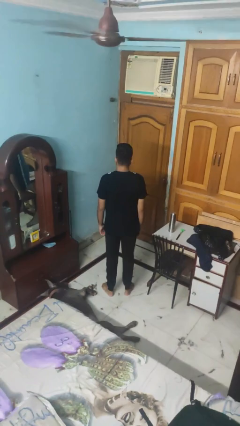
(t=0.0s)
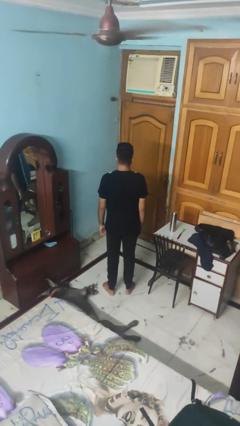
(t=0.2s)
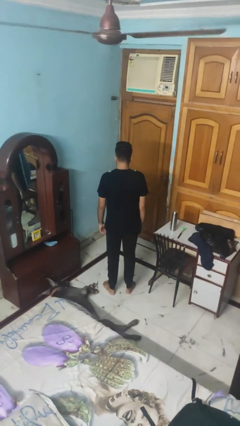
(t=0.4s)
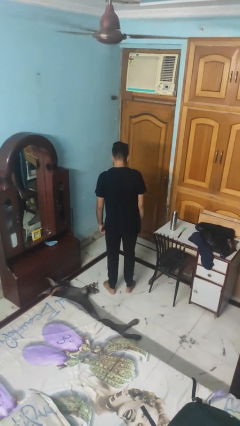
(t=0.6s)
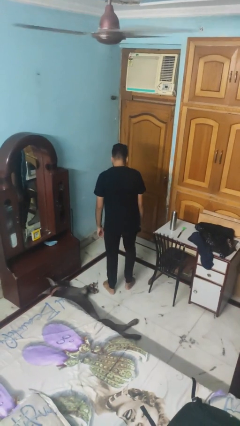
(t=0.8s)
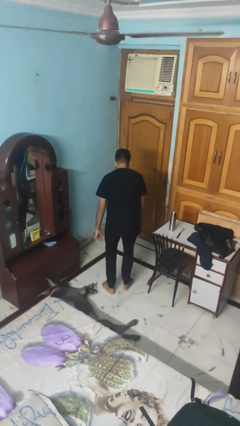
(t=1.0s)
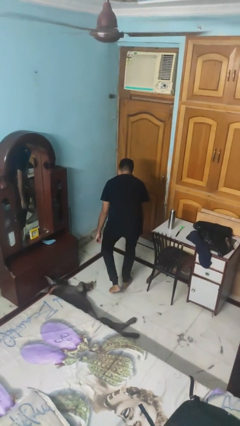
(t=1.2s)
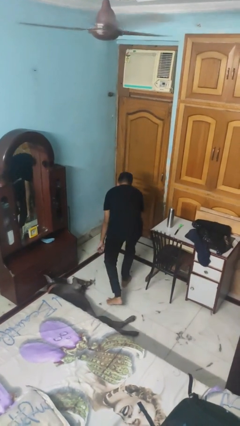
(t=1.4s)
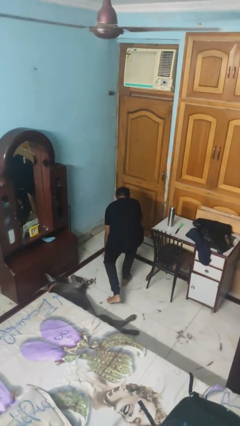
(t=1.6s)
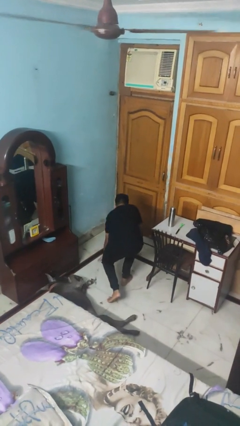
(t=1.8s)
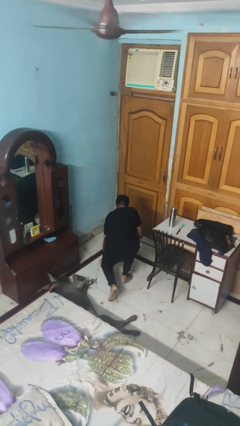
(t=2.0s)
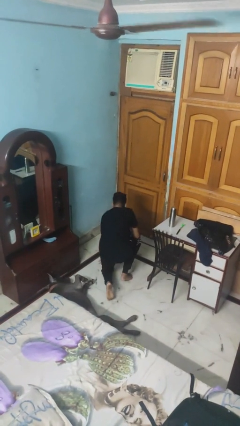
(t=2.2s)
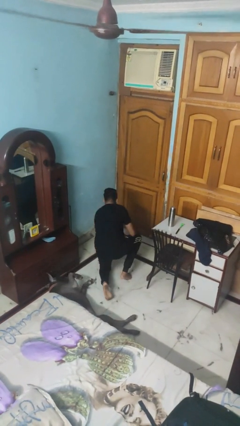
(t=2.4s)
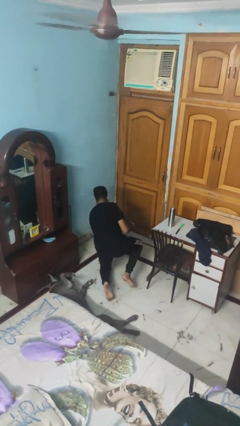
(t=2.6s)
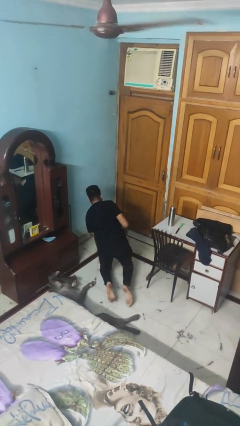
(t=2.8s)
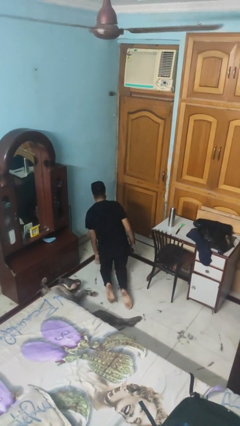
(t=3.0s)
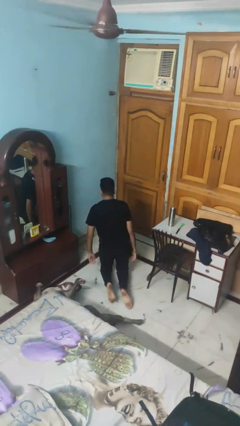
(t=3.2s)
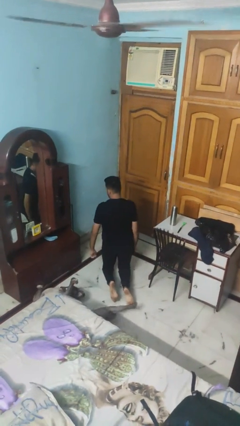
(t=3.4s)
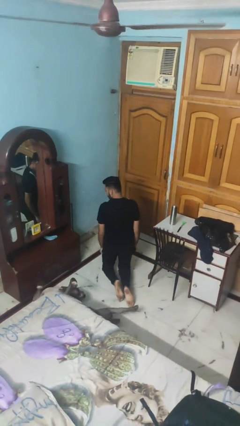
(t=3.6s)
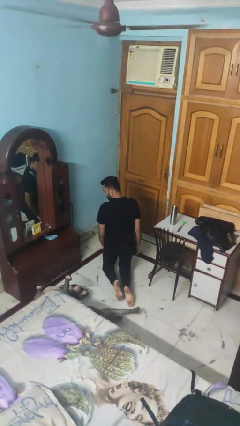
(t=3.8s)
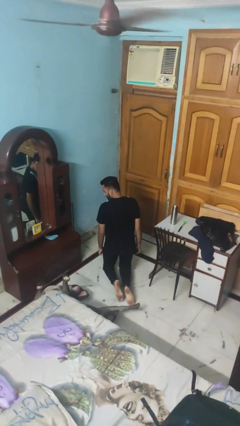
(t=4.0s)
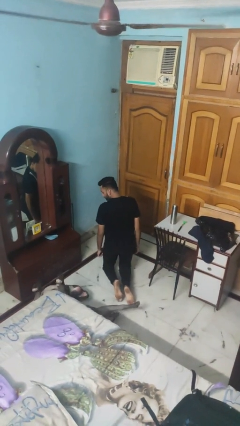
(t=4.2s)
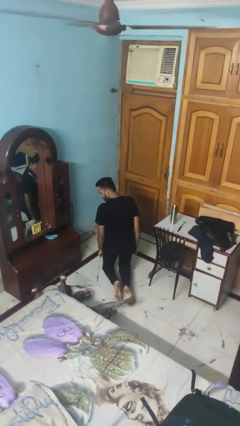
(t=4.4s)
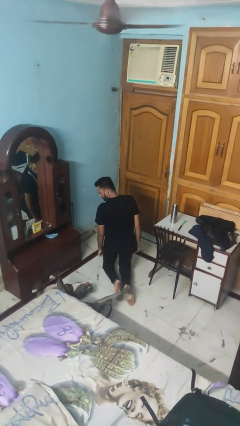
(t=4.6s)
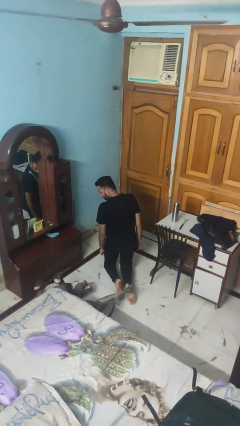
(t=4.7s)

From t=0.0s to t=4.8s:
person kneels

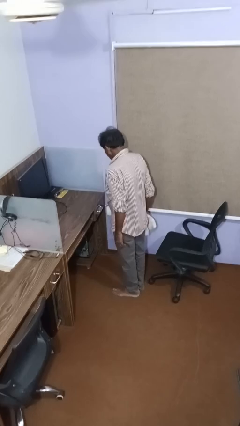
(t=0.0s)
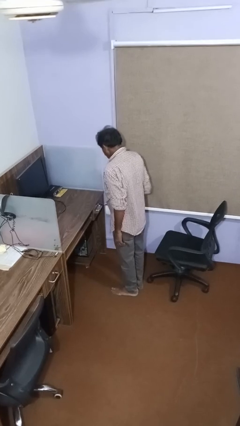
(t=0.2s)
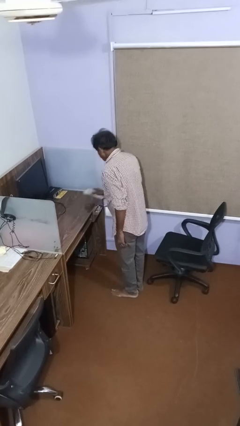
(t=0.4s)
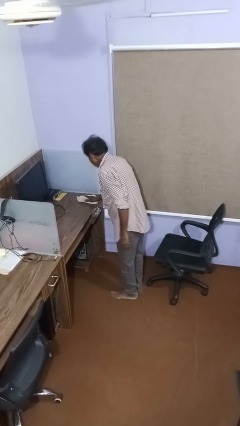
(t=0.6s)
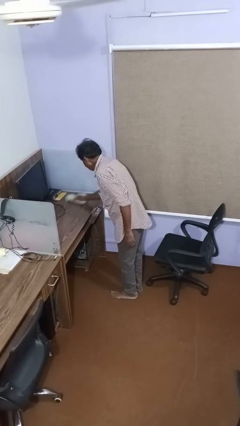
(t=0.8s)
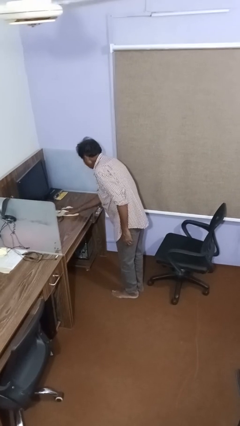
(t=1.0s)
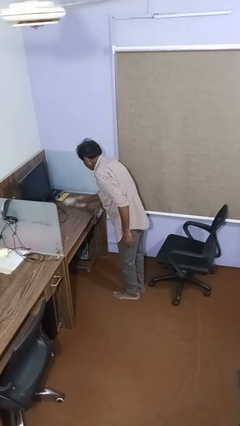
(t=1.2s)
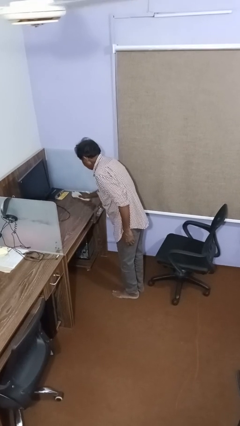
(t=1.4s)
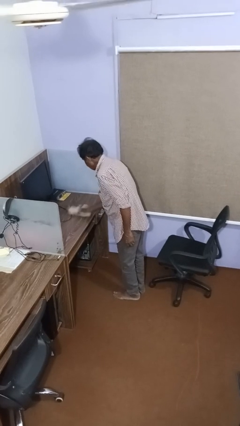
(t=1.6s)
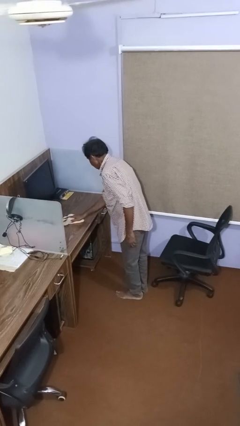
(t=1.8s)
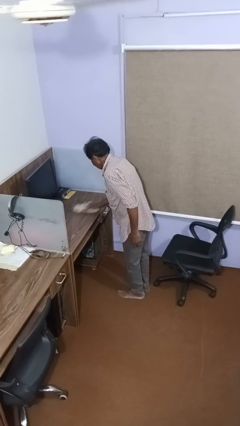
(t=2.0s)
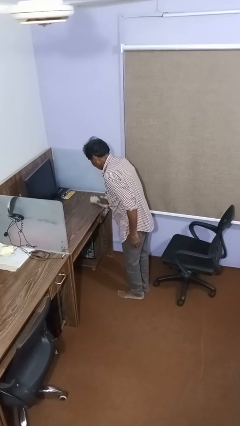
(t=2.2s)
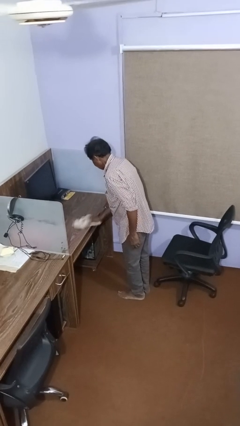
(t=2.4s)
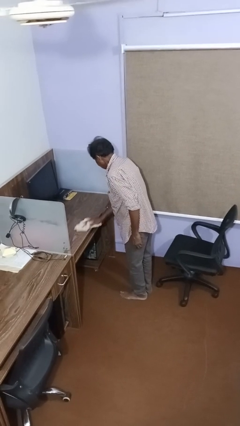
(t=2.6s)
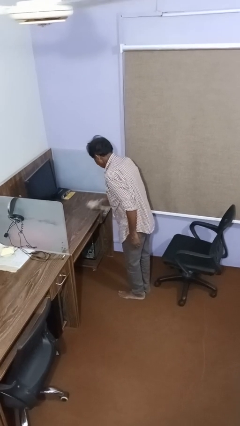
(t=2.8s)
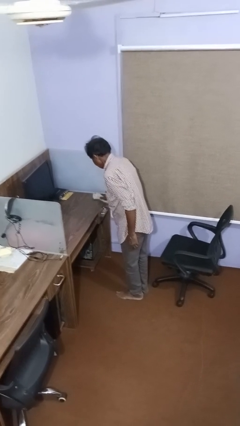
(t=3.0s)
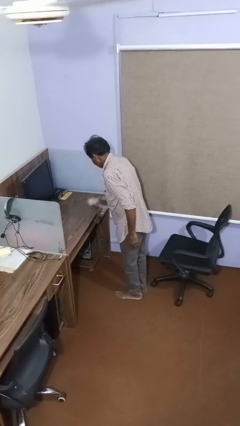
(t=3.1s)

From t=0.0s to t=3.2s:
person dusts furniture

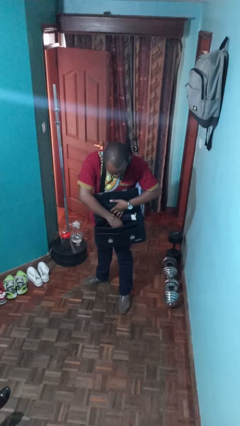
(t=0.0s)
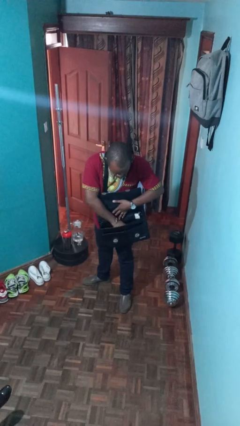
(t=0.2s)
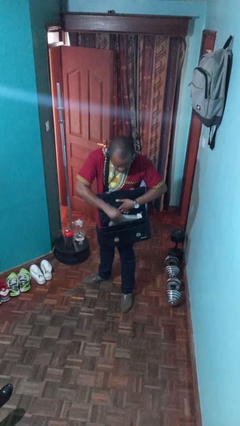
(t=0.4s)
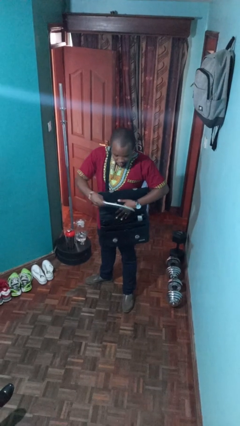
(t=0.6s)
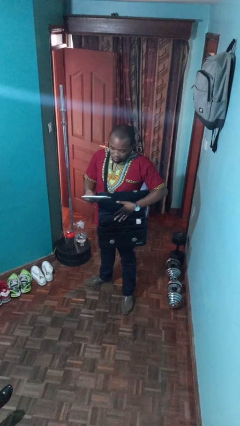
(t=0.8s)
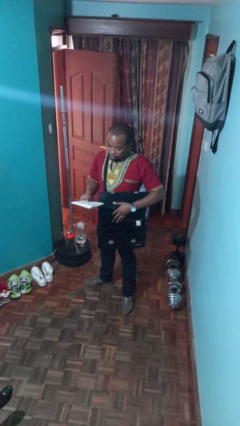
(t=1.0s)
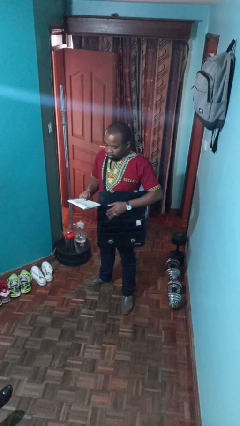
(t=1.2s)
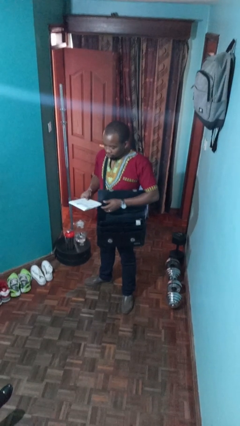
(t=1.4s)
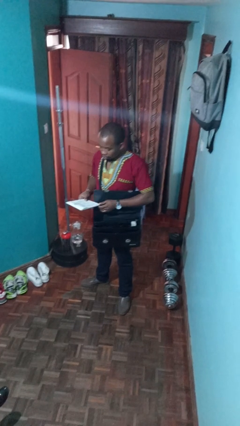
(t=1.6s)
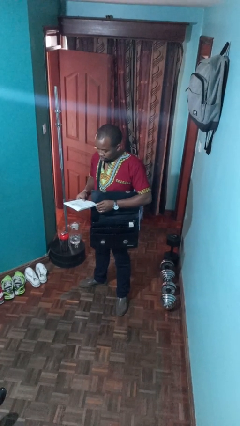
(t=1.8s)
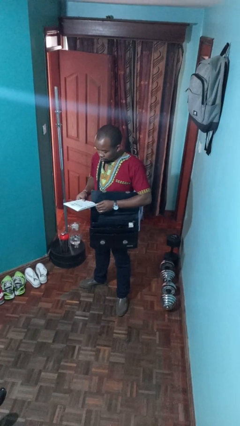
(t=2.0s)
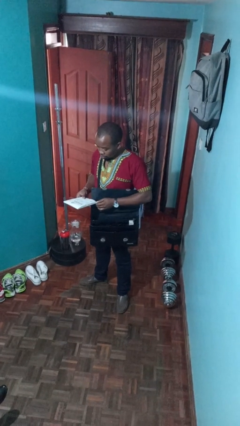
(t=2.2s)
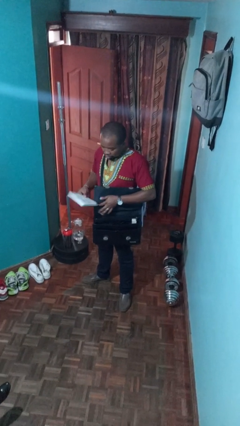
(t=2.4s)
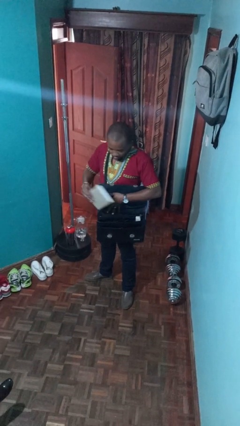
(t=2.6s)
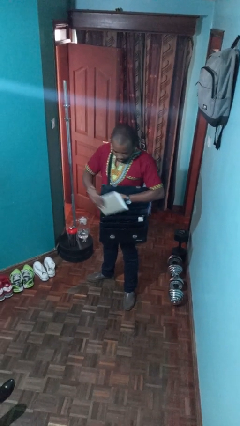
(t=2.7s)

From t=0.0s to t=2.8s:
person takes object from purse

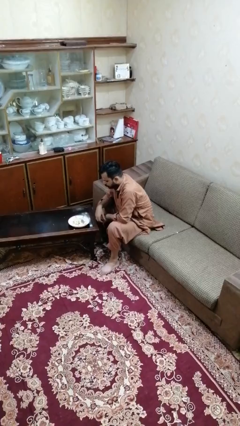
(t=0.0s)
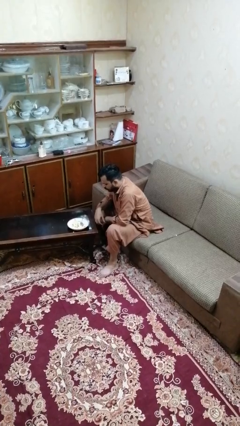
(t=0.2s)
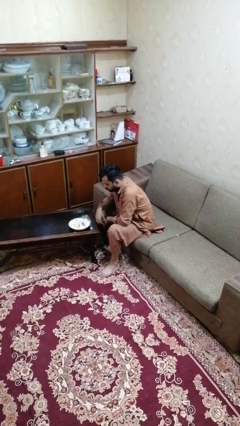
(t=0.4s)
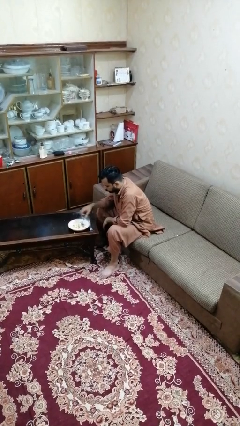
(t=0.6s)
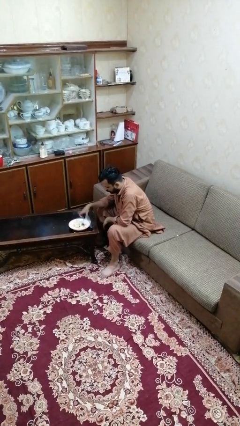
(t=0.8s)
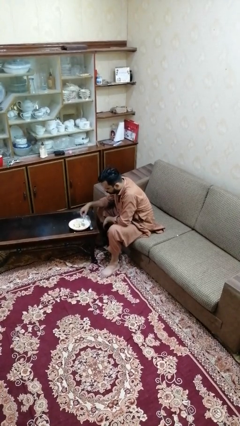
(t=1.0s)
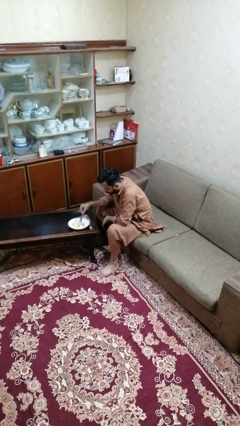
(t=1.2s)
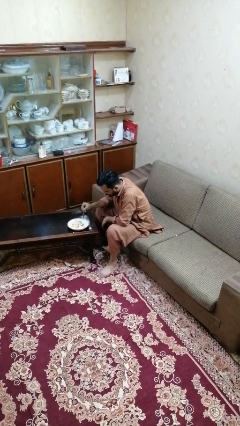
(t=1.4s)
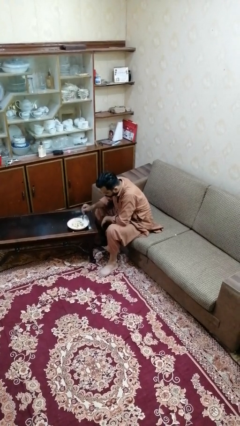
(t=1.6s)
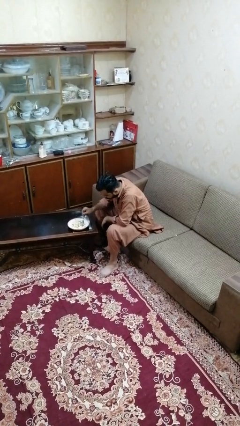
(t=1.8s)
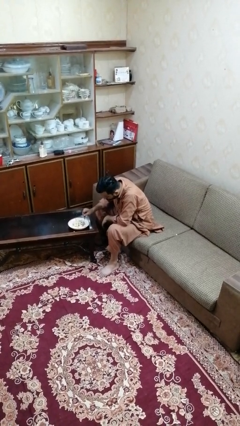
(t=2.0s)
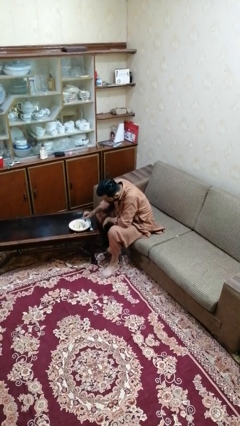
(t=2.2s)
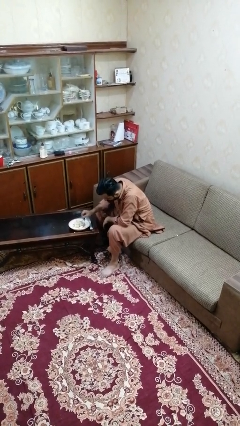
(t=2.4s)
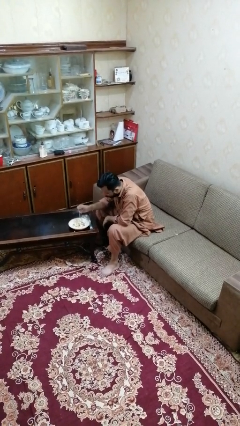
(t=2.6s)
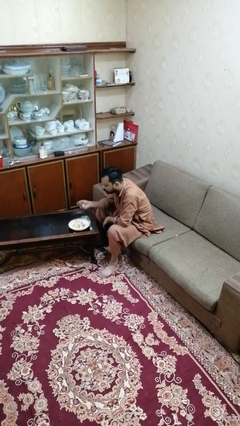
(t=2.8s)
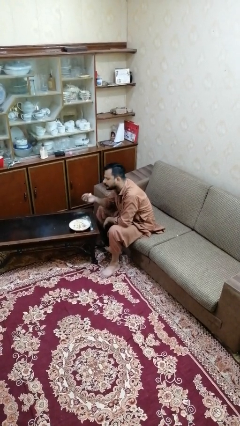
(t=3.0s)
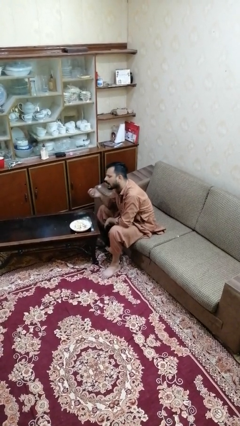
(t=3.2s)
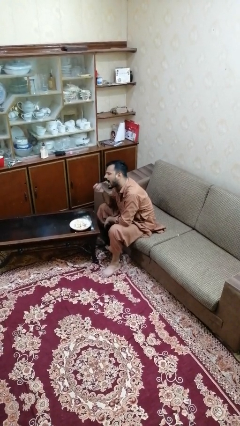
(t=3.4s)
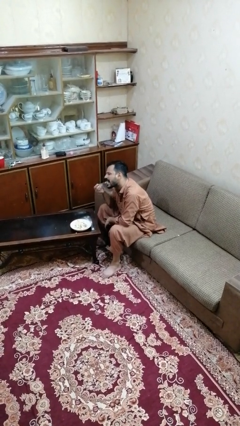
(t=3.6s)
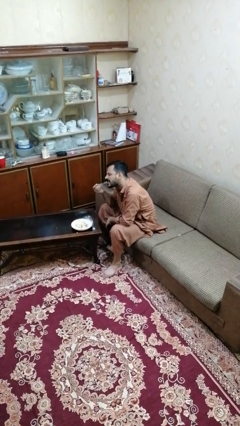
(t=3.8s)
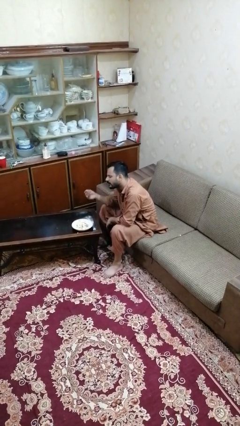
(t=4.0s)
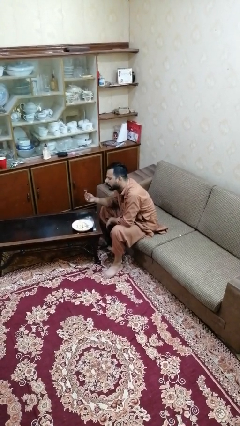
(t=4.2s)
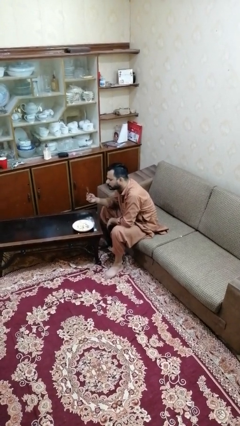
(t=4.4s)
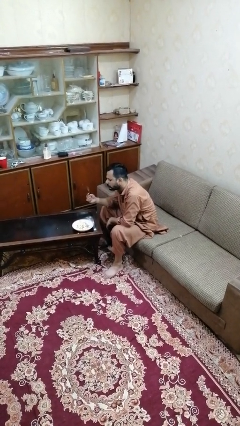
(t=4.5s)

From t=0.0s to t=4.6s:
person eats with utensil

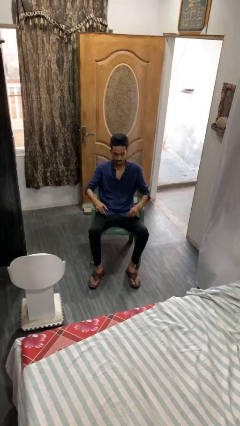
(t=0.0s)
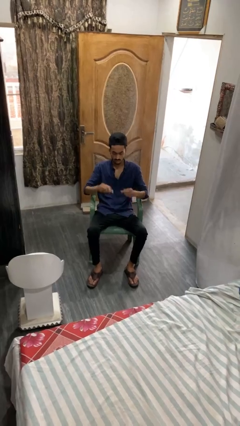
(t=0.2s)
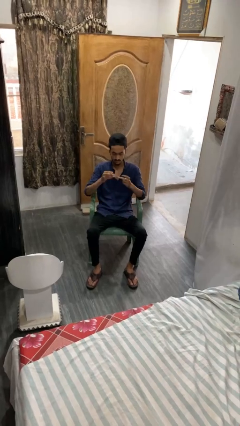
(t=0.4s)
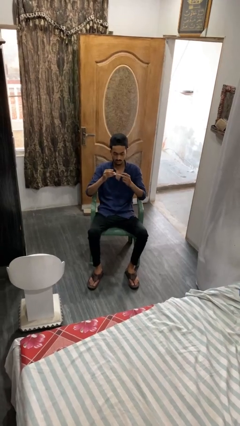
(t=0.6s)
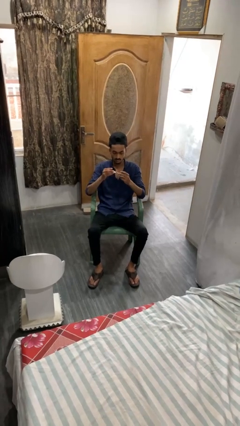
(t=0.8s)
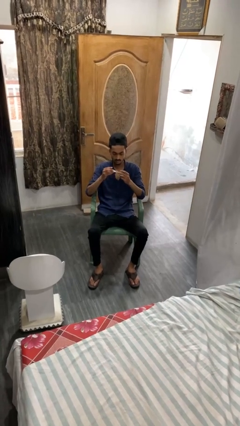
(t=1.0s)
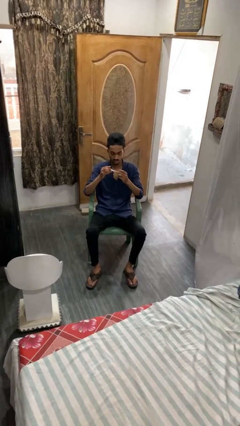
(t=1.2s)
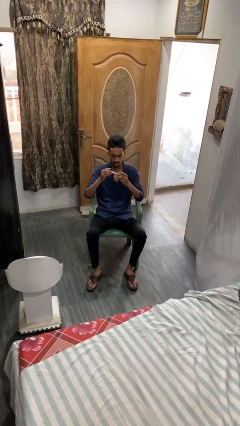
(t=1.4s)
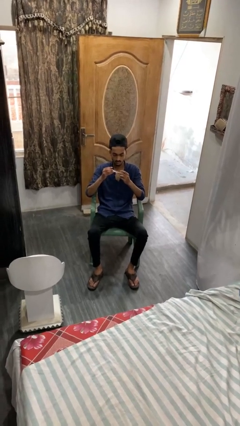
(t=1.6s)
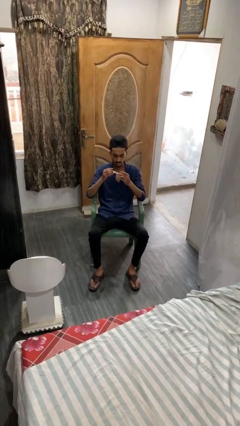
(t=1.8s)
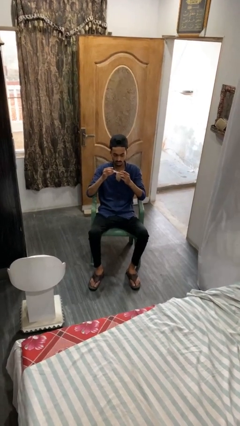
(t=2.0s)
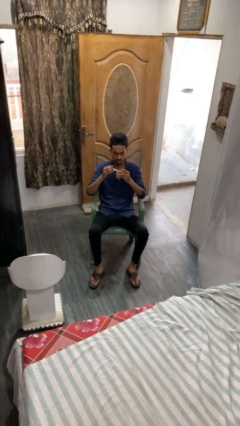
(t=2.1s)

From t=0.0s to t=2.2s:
person clips fingernails
